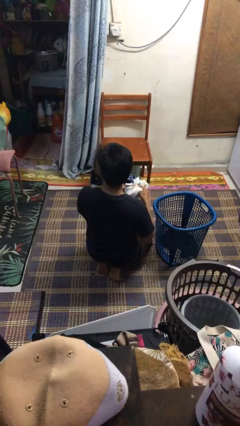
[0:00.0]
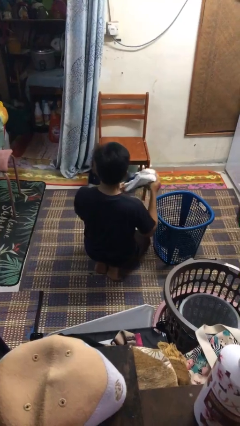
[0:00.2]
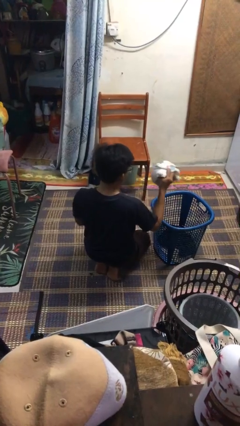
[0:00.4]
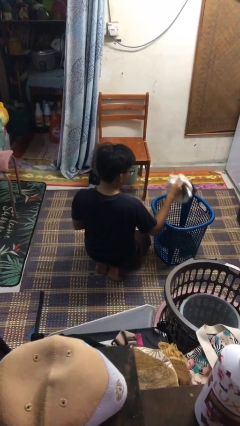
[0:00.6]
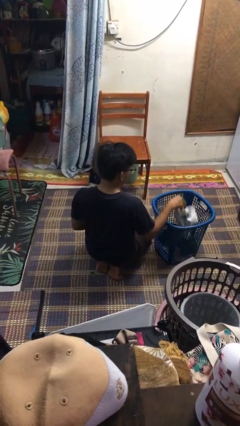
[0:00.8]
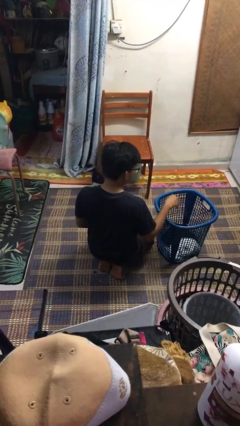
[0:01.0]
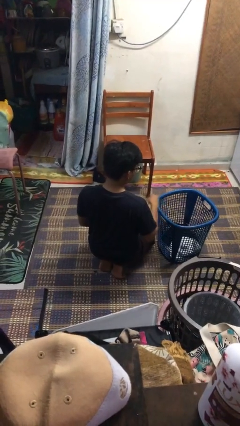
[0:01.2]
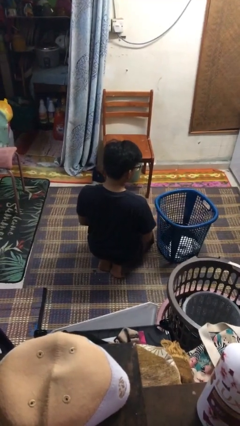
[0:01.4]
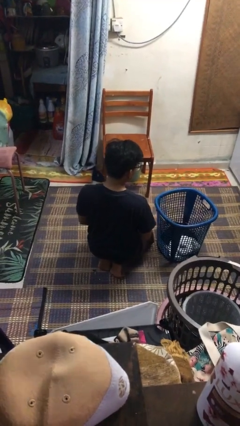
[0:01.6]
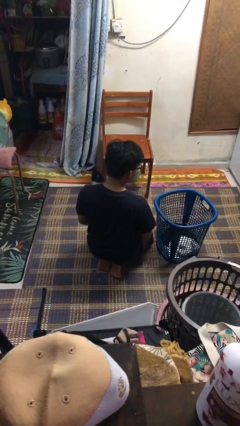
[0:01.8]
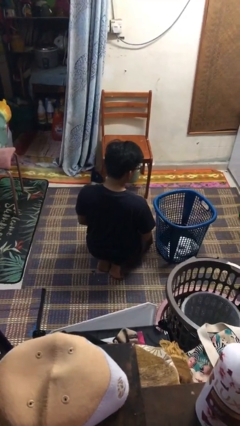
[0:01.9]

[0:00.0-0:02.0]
person puts object into basket

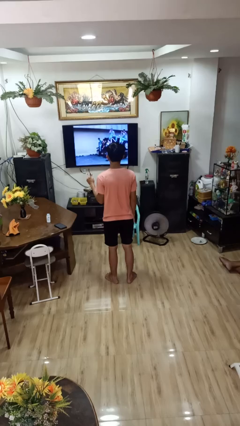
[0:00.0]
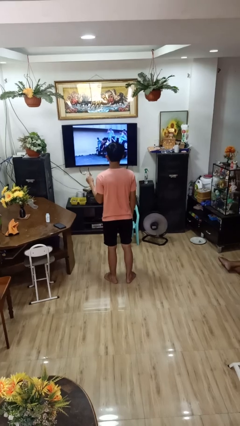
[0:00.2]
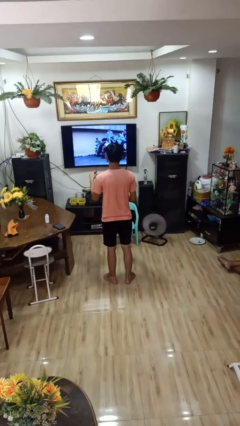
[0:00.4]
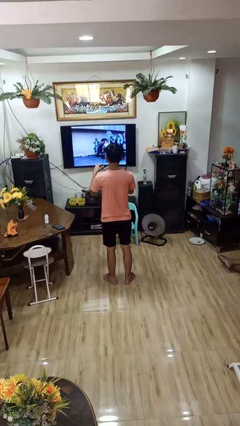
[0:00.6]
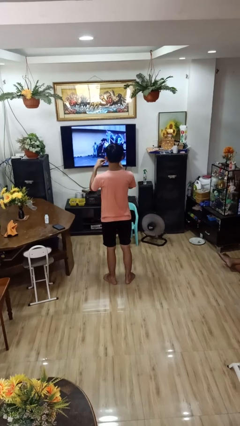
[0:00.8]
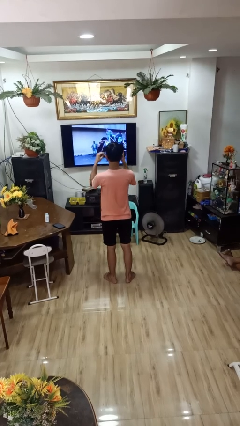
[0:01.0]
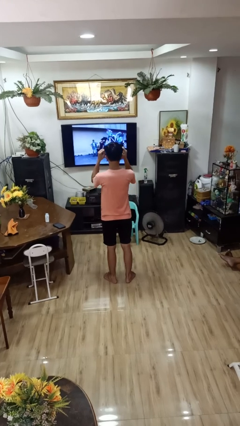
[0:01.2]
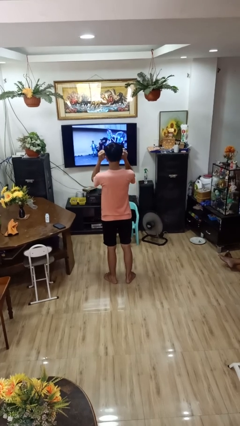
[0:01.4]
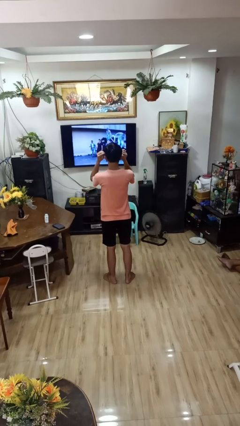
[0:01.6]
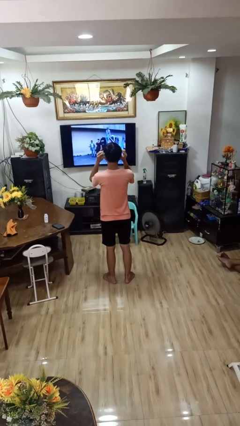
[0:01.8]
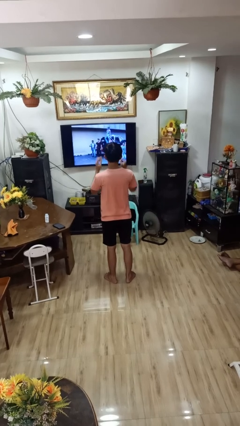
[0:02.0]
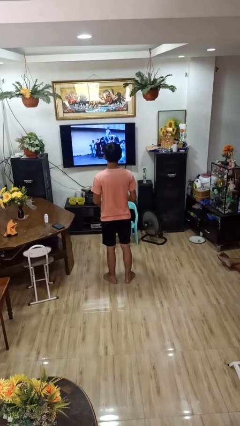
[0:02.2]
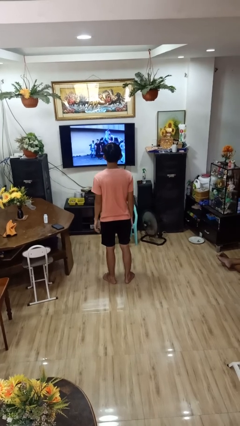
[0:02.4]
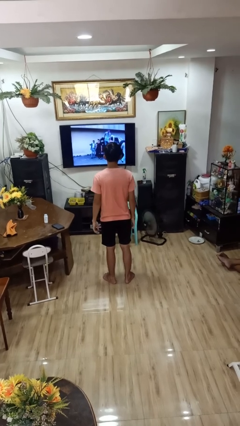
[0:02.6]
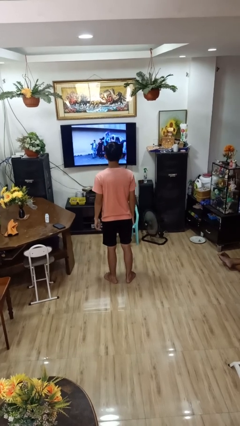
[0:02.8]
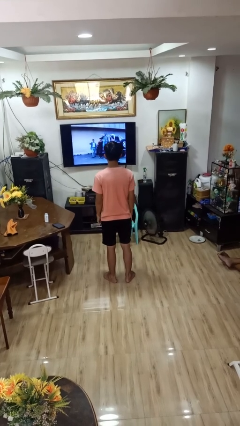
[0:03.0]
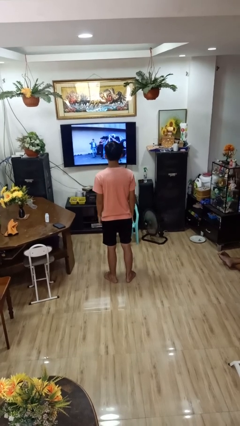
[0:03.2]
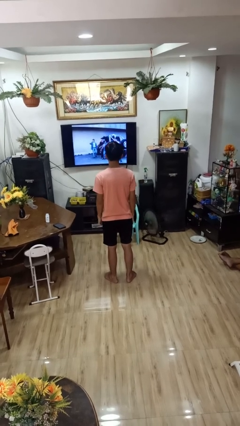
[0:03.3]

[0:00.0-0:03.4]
person puts on glasses

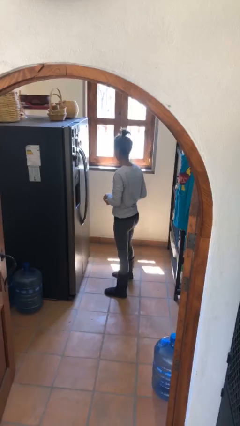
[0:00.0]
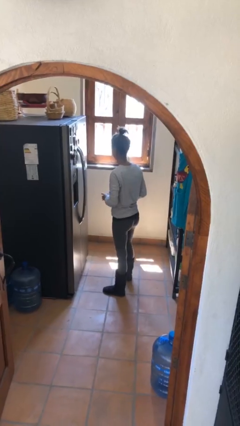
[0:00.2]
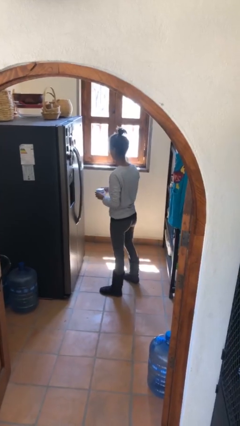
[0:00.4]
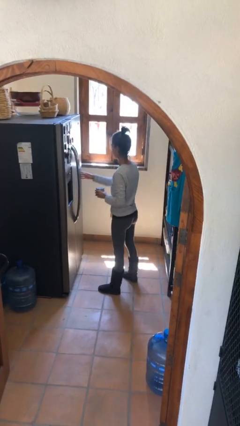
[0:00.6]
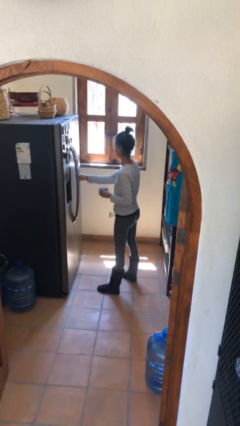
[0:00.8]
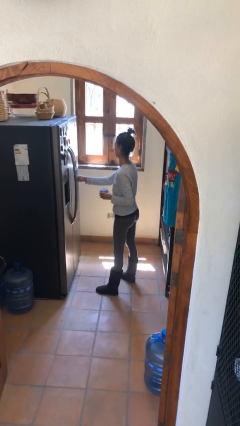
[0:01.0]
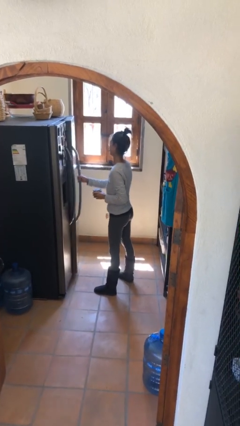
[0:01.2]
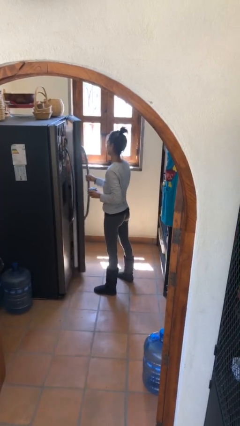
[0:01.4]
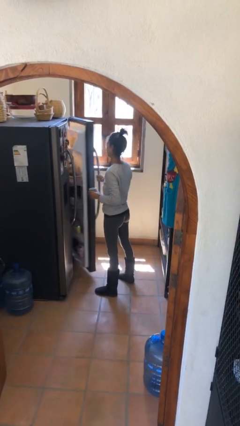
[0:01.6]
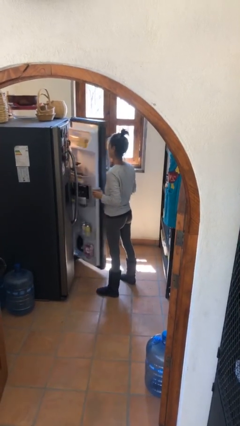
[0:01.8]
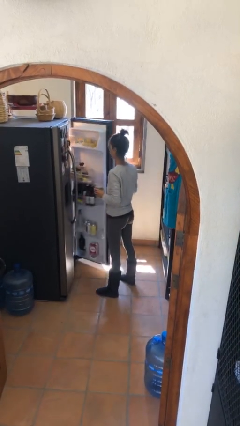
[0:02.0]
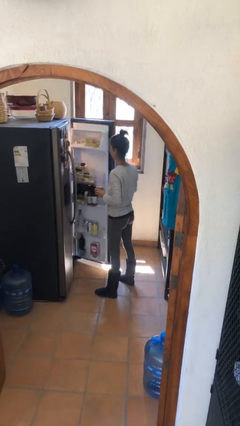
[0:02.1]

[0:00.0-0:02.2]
person opens refrigerator

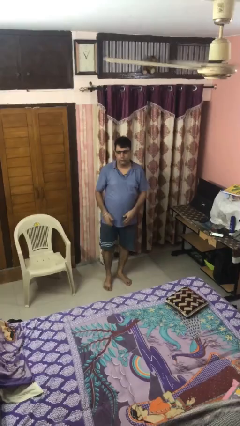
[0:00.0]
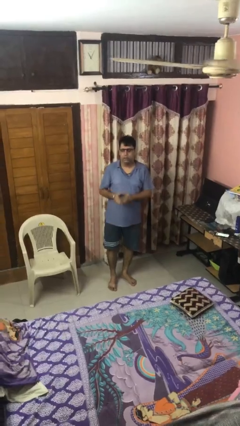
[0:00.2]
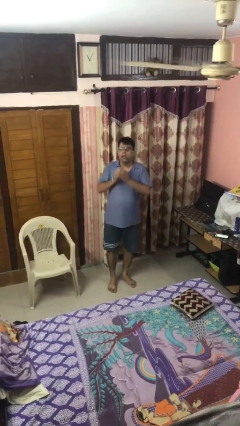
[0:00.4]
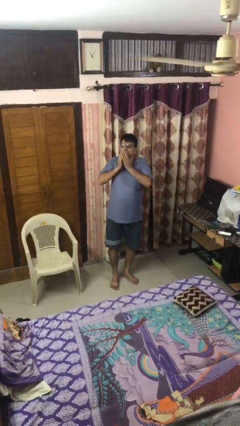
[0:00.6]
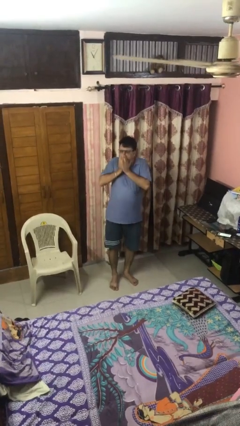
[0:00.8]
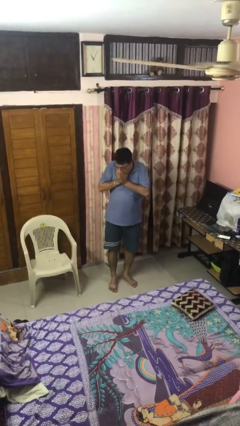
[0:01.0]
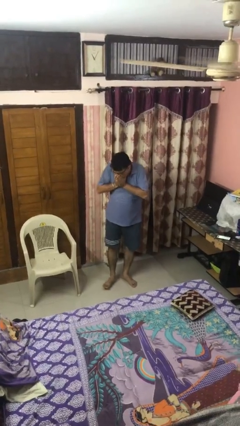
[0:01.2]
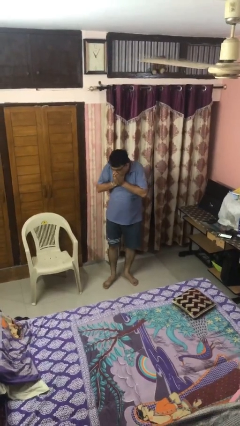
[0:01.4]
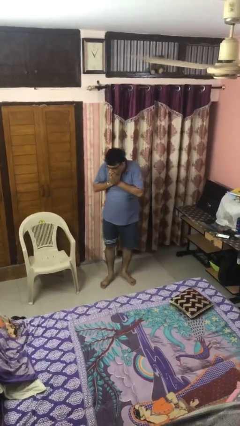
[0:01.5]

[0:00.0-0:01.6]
person sneezes into hand

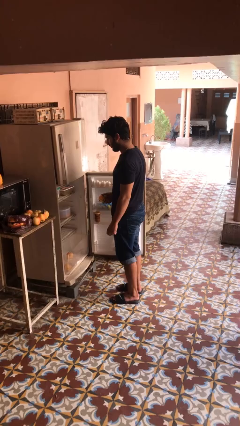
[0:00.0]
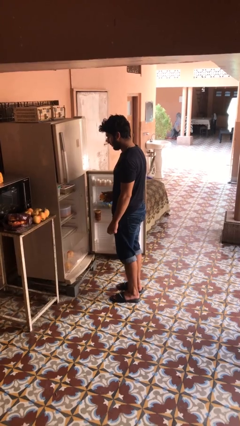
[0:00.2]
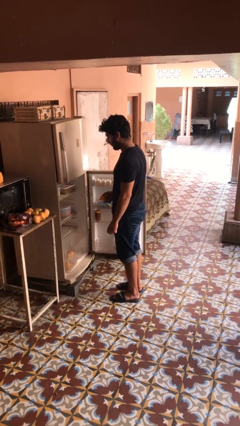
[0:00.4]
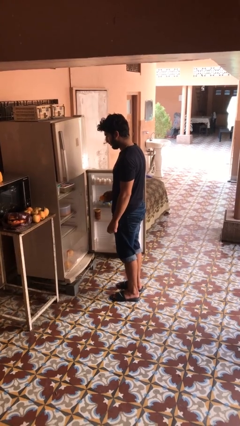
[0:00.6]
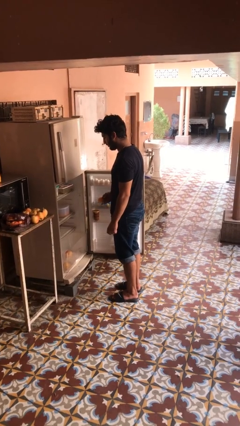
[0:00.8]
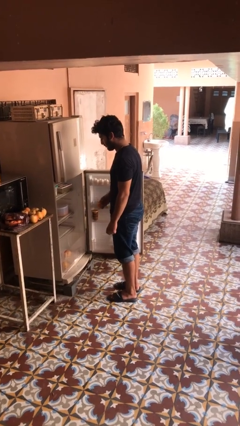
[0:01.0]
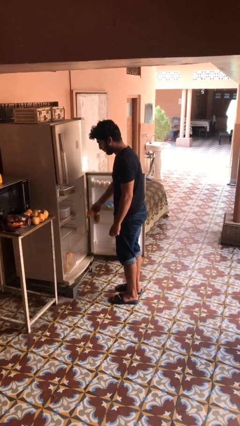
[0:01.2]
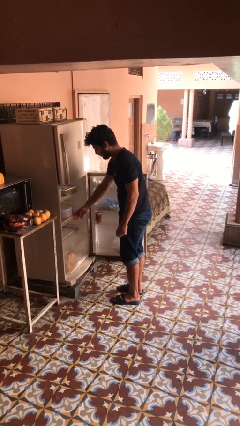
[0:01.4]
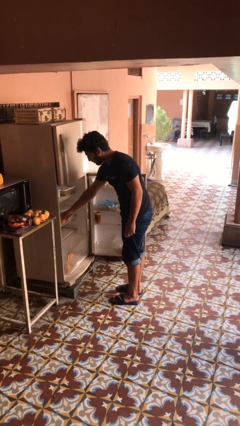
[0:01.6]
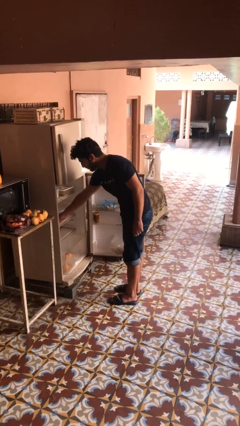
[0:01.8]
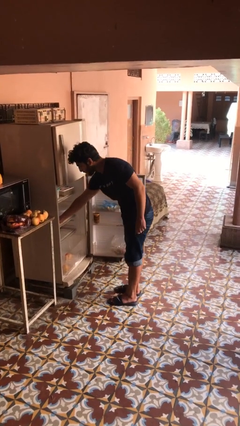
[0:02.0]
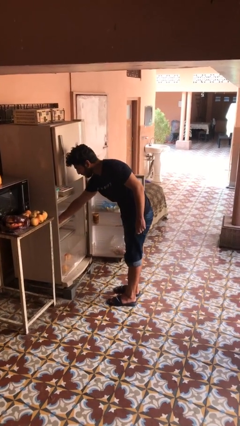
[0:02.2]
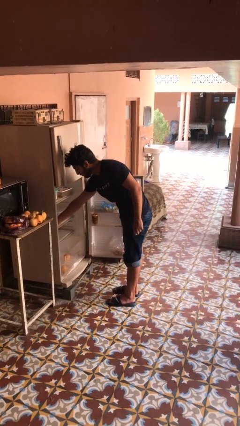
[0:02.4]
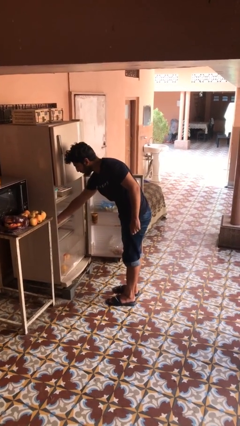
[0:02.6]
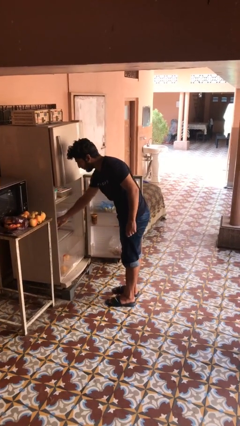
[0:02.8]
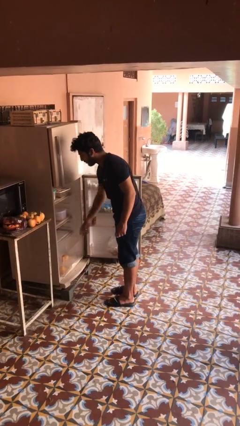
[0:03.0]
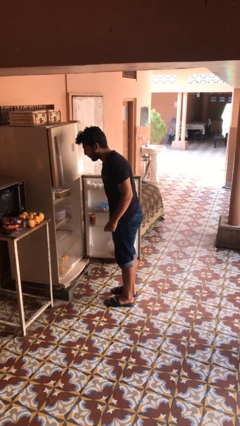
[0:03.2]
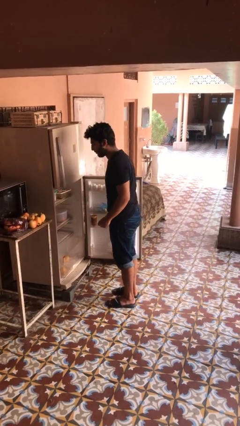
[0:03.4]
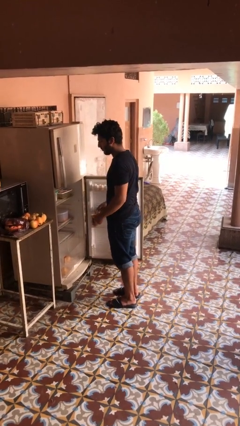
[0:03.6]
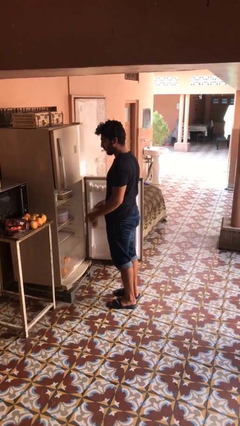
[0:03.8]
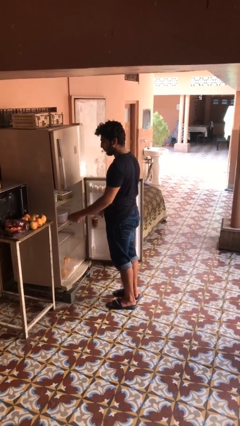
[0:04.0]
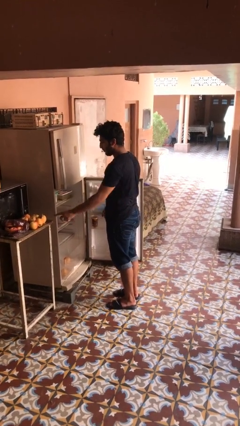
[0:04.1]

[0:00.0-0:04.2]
person loads groceries into refrigerator

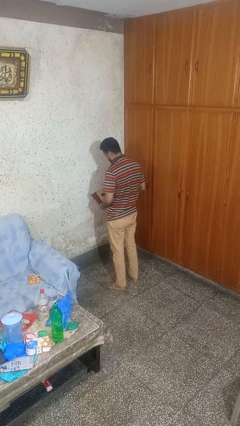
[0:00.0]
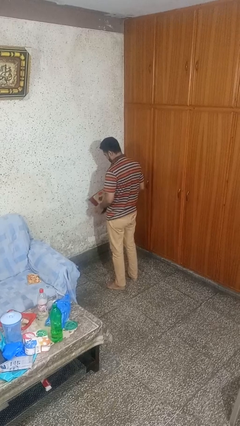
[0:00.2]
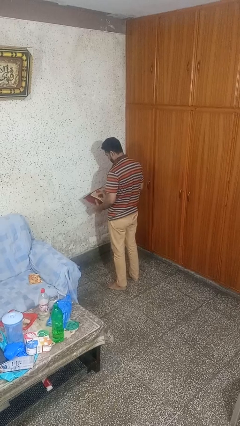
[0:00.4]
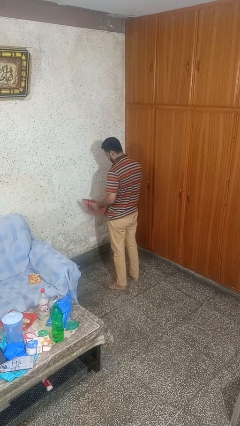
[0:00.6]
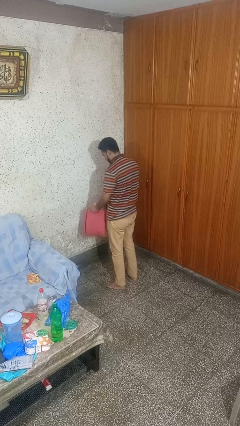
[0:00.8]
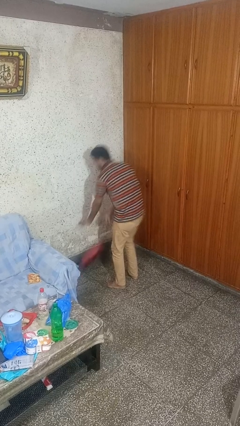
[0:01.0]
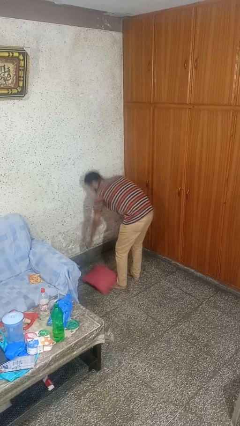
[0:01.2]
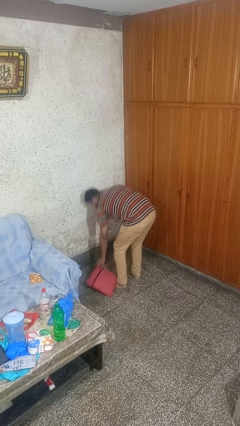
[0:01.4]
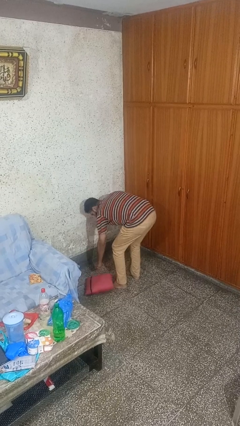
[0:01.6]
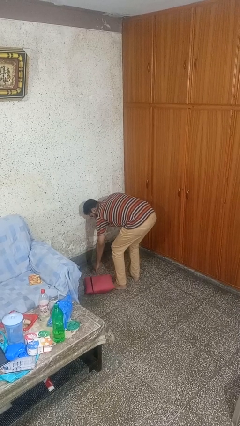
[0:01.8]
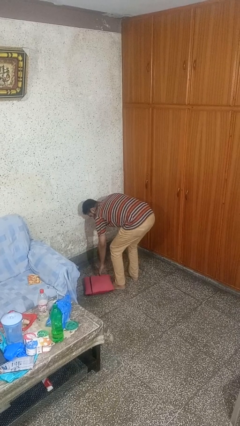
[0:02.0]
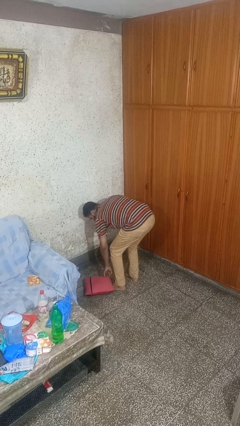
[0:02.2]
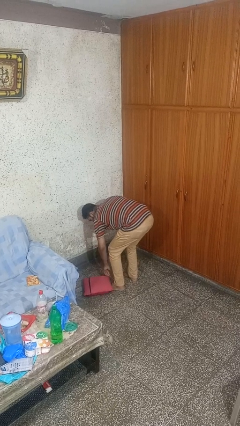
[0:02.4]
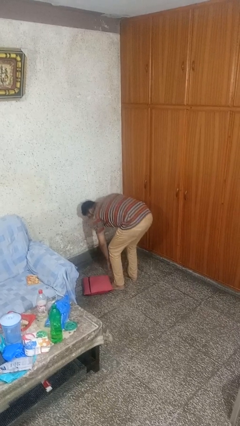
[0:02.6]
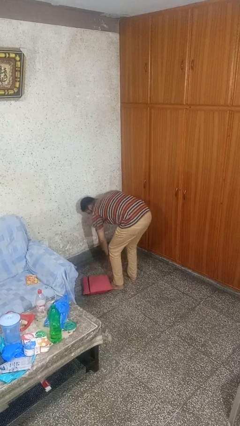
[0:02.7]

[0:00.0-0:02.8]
person drops object

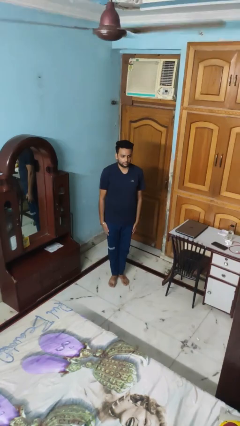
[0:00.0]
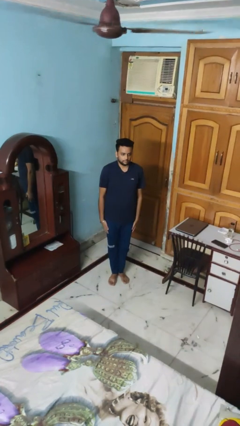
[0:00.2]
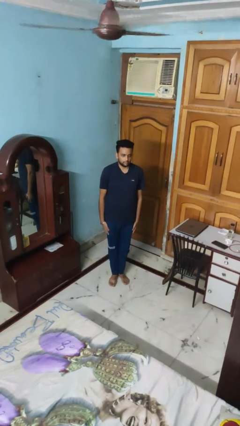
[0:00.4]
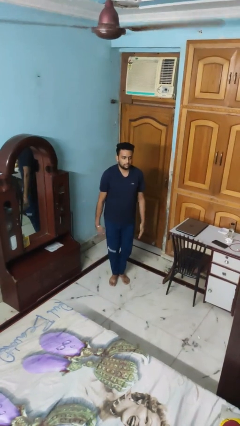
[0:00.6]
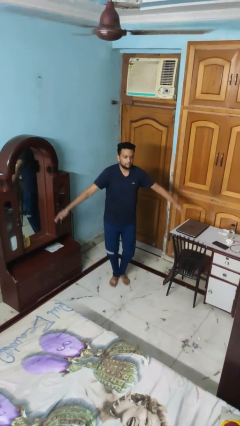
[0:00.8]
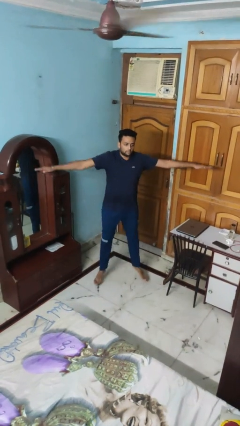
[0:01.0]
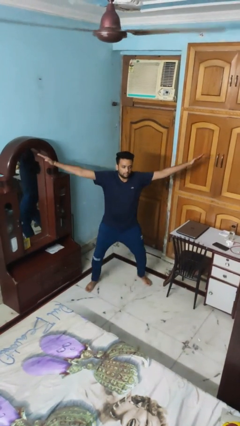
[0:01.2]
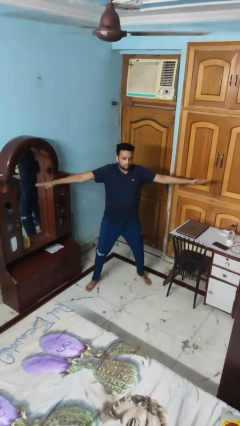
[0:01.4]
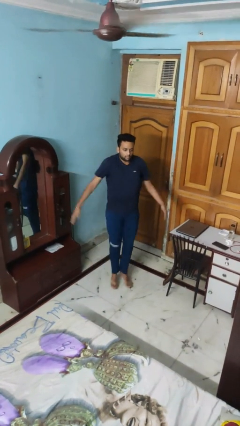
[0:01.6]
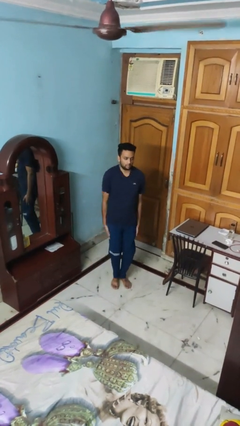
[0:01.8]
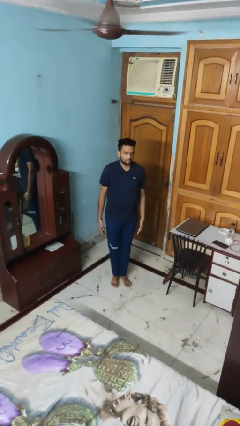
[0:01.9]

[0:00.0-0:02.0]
person exercises with jumping jacks
